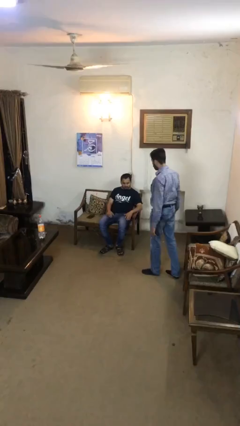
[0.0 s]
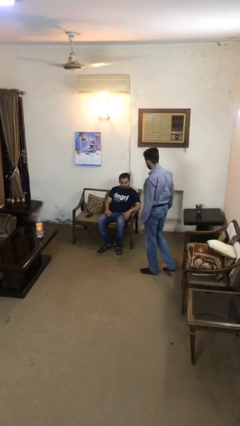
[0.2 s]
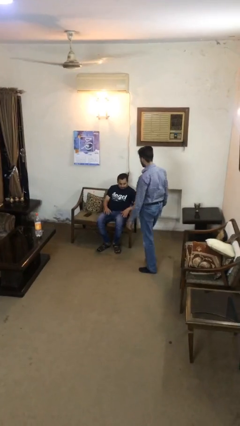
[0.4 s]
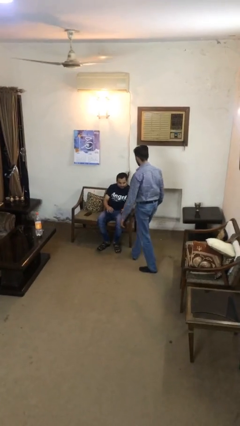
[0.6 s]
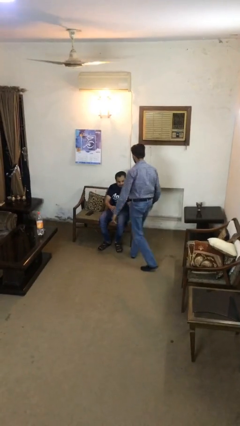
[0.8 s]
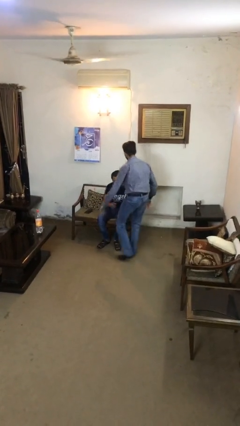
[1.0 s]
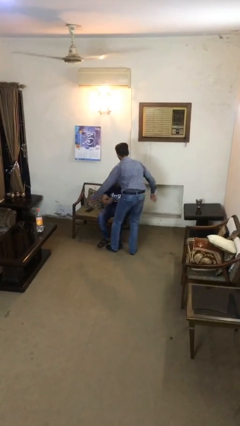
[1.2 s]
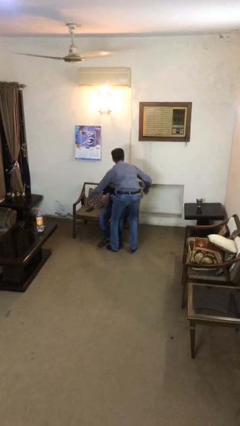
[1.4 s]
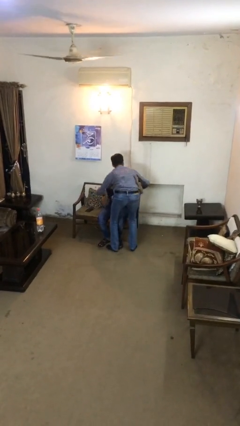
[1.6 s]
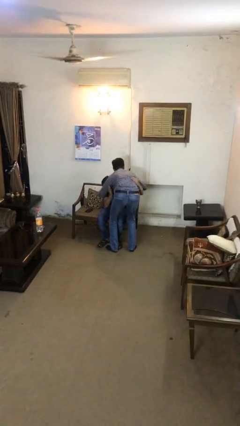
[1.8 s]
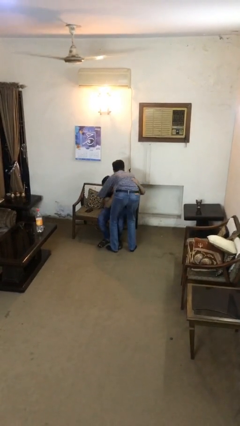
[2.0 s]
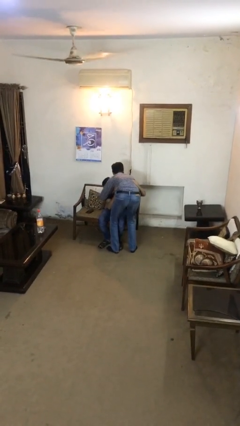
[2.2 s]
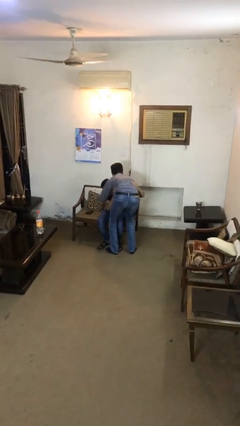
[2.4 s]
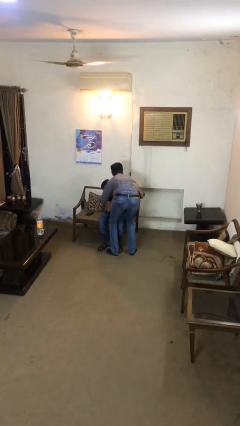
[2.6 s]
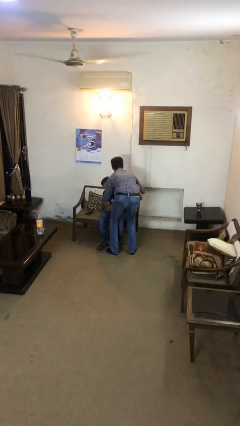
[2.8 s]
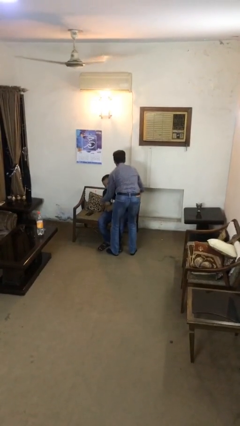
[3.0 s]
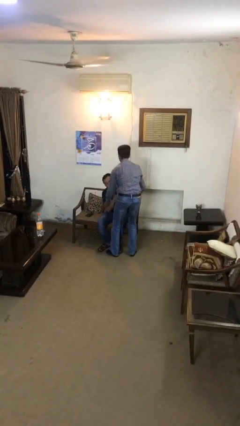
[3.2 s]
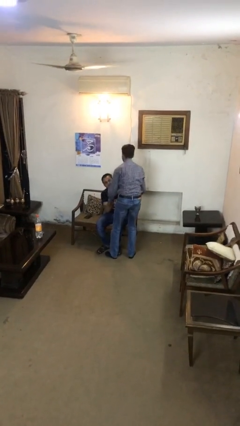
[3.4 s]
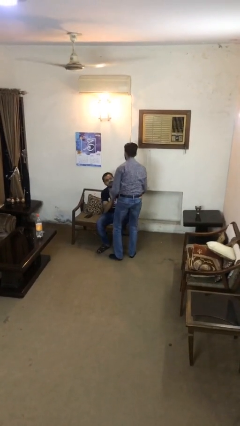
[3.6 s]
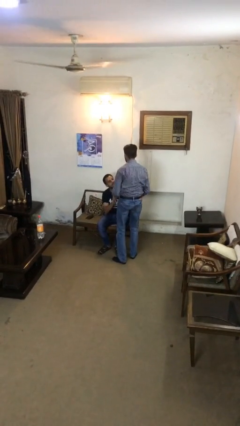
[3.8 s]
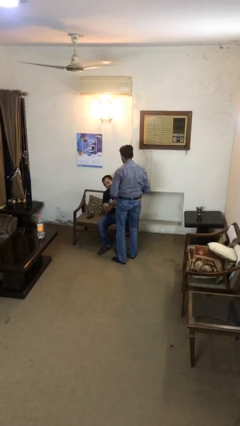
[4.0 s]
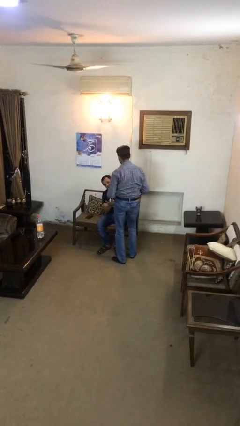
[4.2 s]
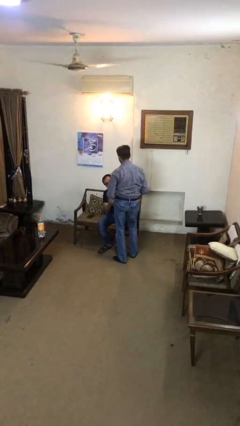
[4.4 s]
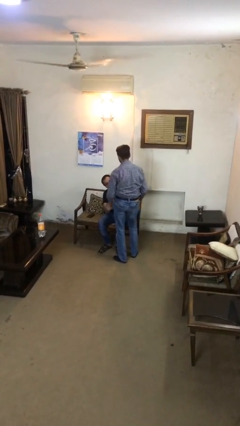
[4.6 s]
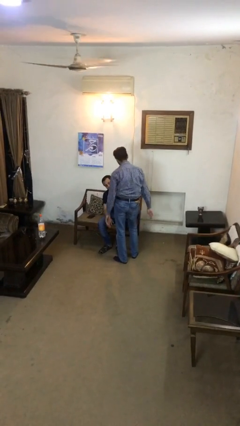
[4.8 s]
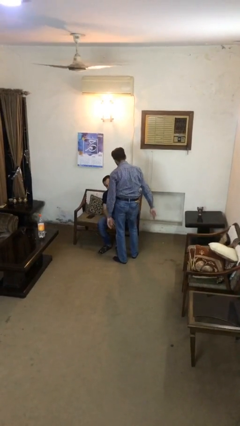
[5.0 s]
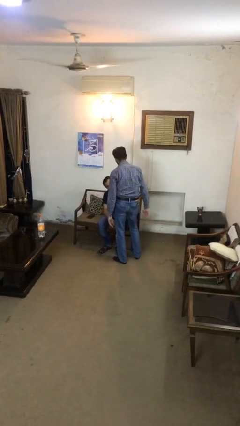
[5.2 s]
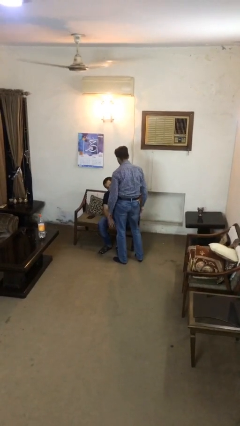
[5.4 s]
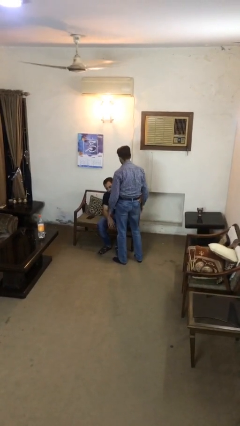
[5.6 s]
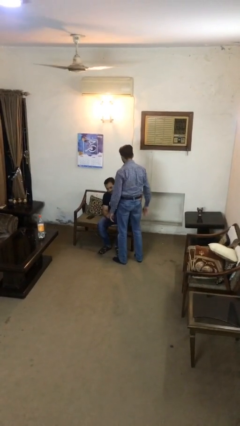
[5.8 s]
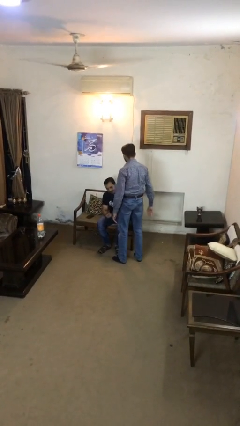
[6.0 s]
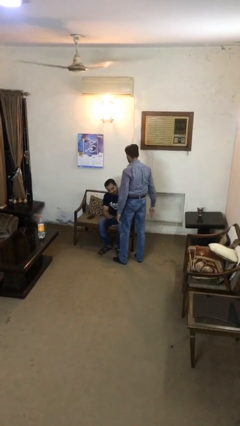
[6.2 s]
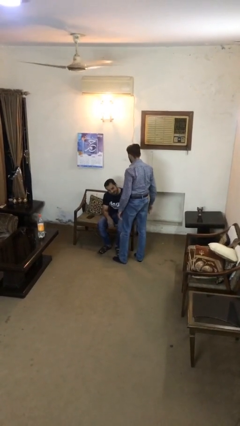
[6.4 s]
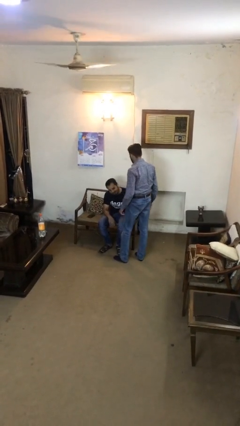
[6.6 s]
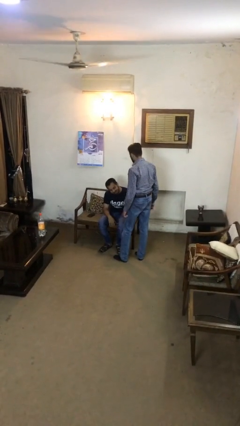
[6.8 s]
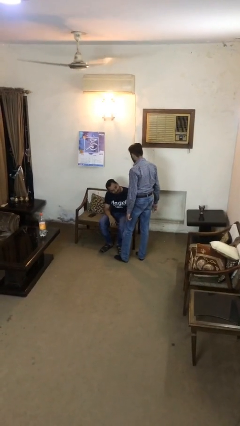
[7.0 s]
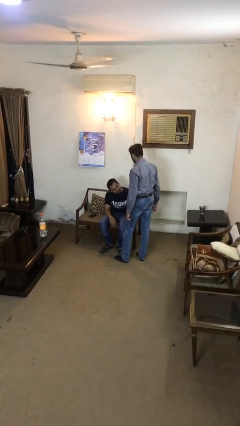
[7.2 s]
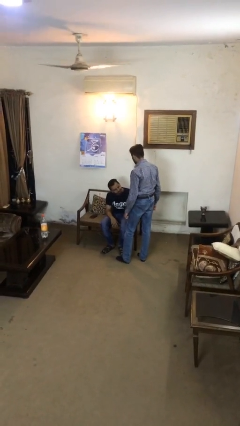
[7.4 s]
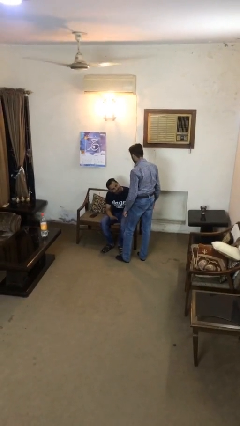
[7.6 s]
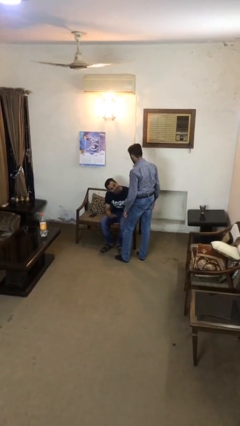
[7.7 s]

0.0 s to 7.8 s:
person embraces person

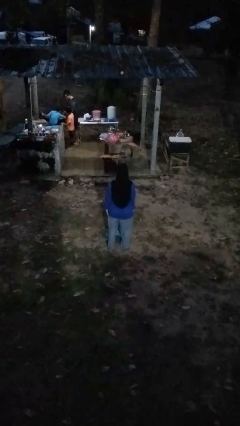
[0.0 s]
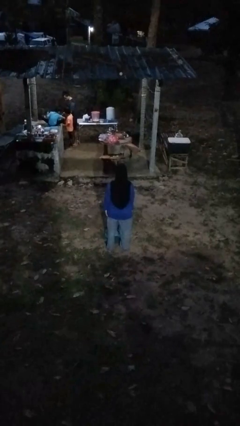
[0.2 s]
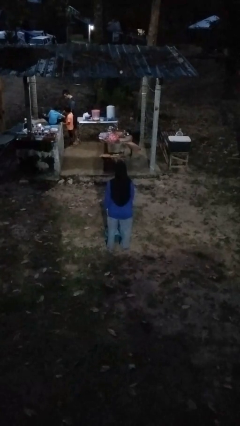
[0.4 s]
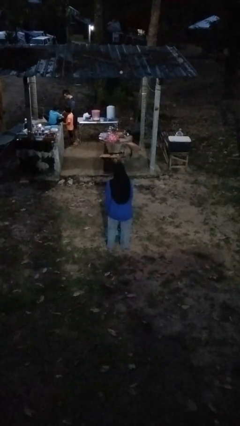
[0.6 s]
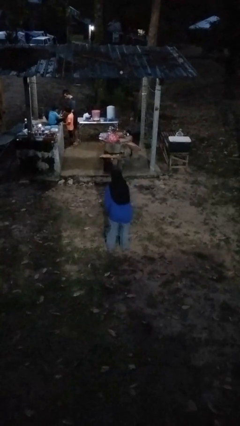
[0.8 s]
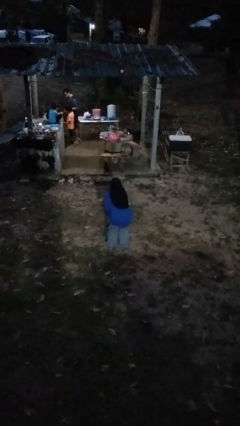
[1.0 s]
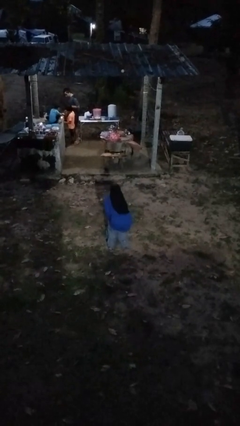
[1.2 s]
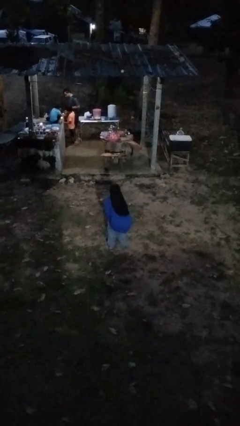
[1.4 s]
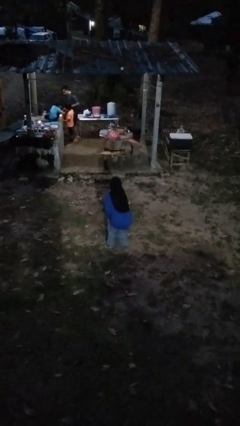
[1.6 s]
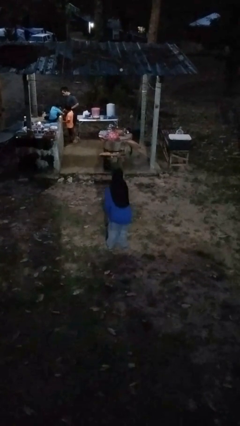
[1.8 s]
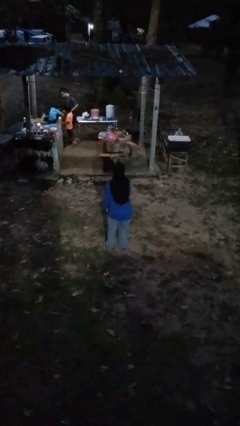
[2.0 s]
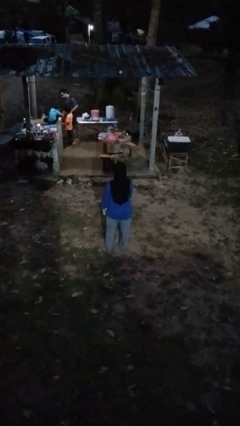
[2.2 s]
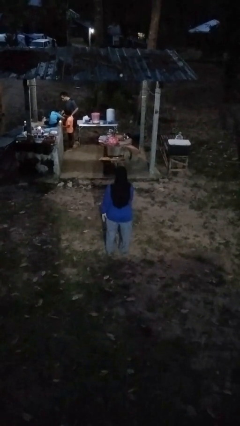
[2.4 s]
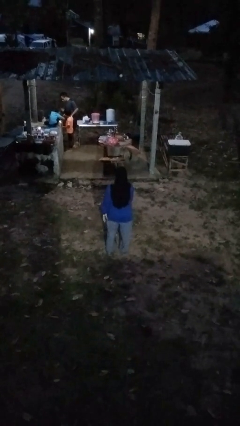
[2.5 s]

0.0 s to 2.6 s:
person picks up object from floor

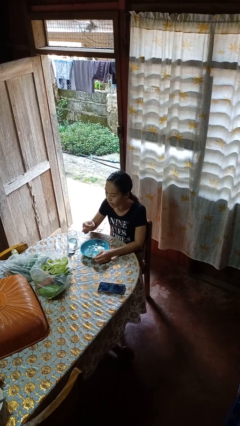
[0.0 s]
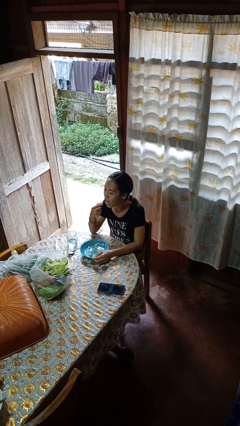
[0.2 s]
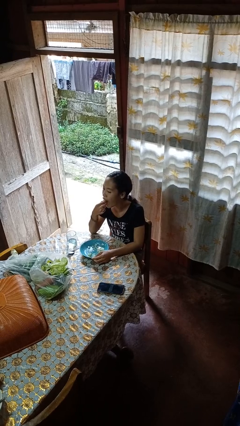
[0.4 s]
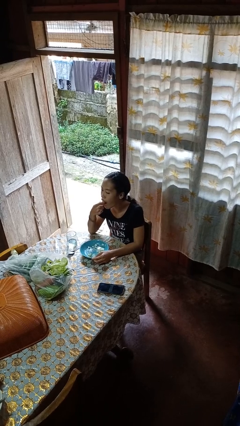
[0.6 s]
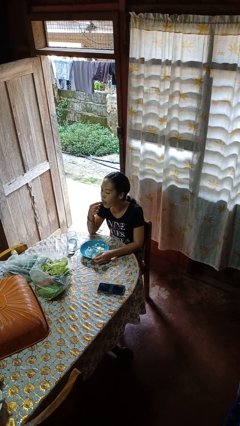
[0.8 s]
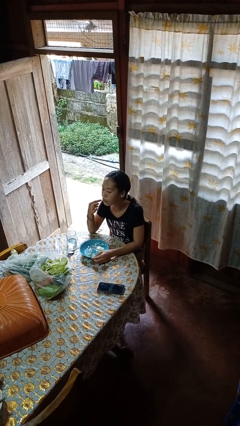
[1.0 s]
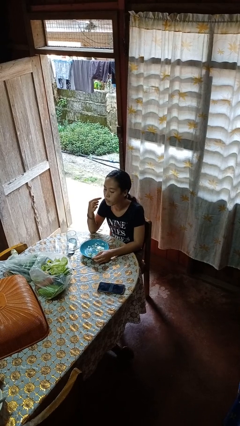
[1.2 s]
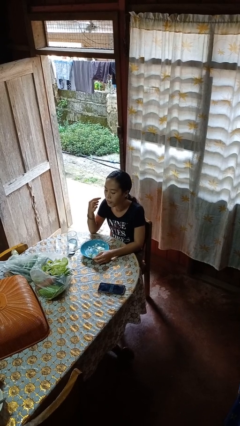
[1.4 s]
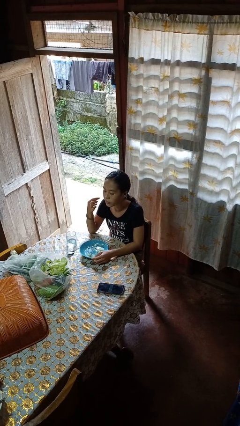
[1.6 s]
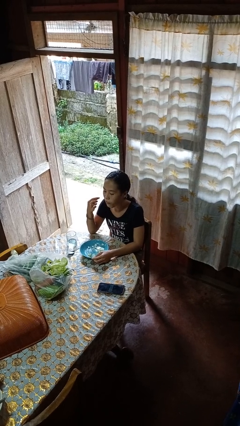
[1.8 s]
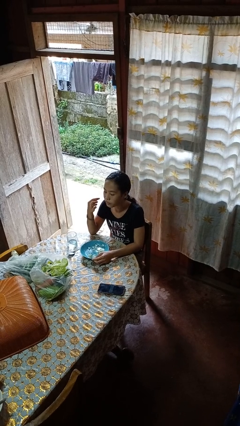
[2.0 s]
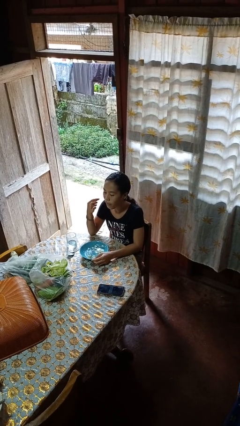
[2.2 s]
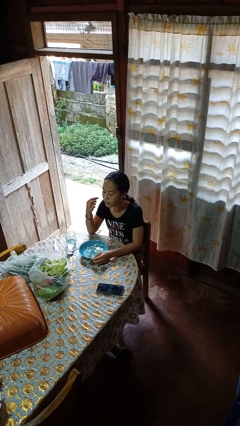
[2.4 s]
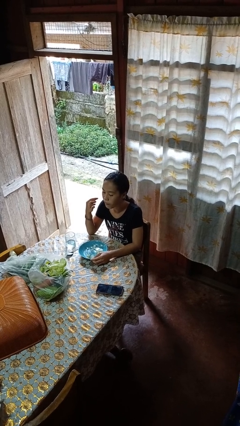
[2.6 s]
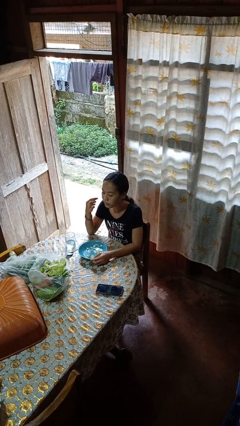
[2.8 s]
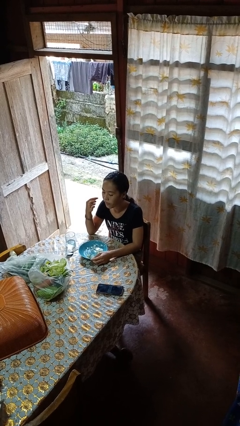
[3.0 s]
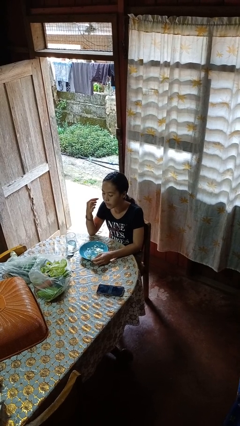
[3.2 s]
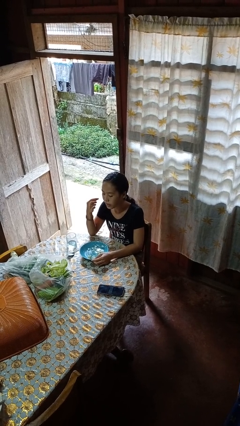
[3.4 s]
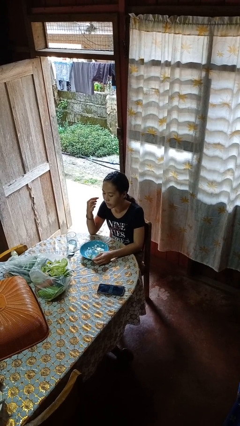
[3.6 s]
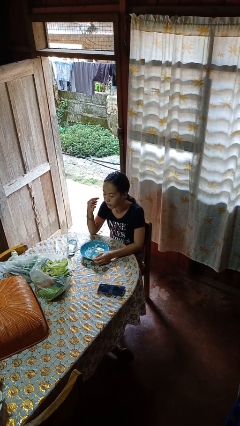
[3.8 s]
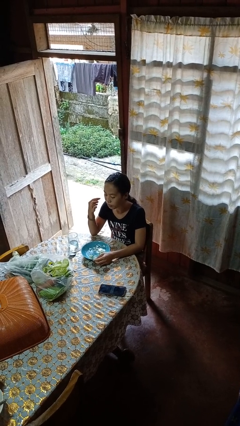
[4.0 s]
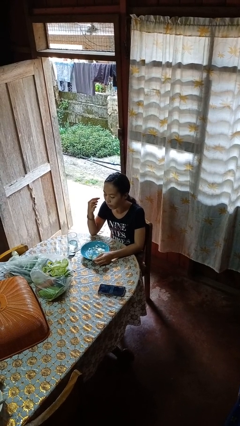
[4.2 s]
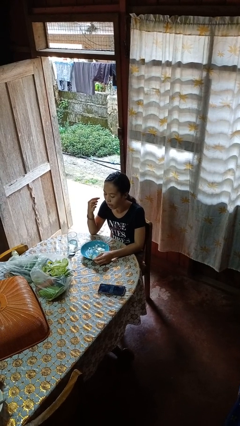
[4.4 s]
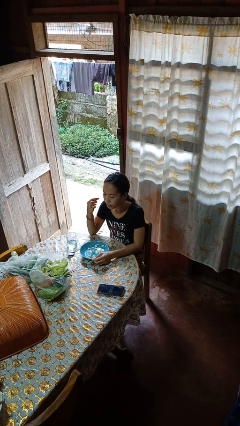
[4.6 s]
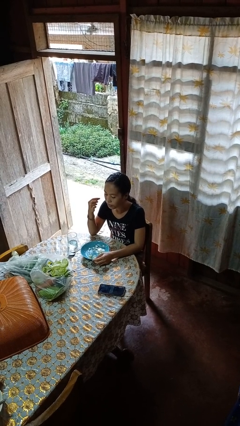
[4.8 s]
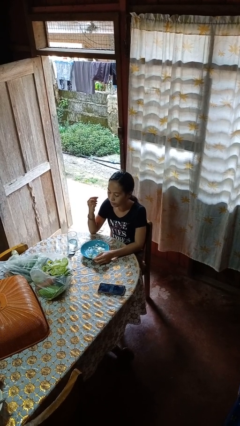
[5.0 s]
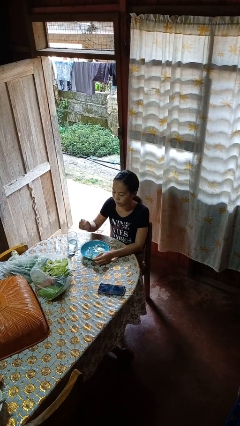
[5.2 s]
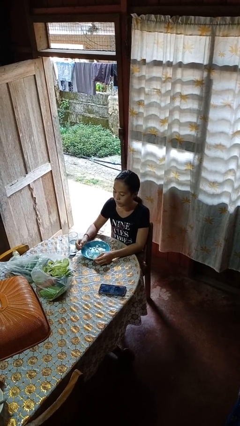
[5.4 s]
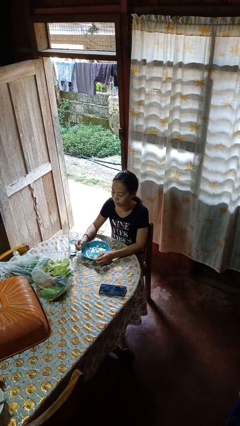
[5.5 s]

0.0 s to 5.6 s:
person eats with hands

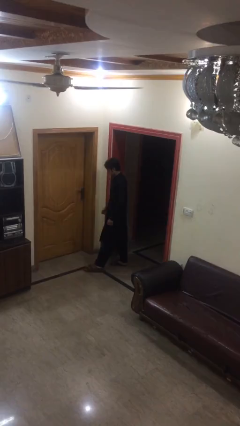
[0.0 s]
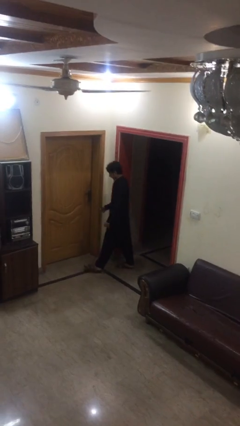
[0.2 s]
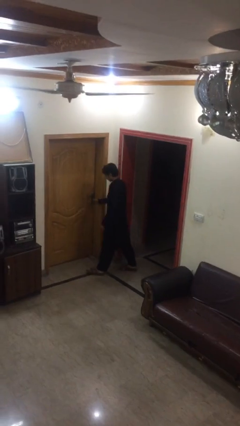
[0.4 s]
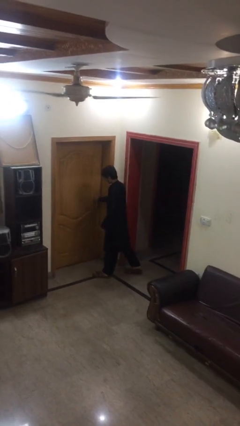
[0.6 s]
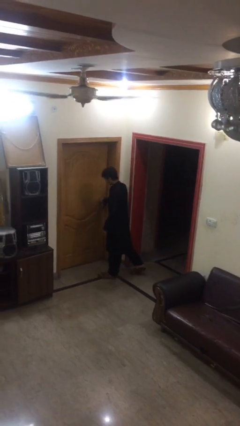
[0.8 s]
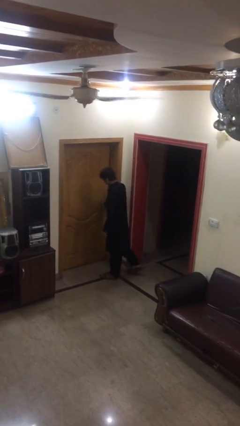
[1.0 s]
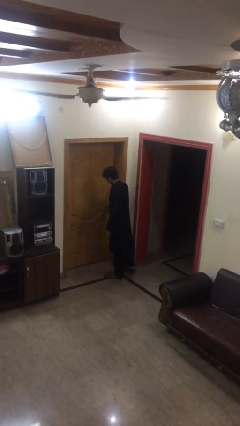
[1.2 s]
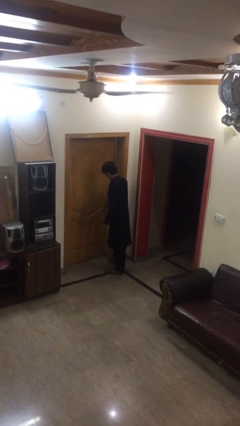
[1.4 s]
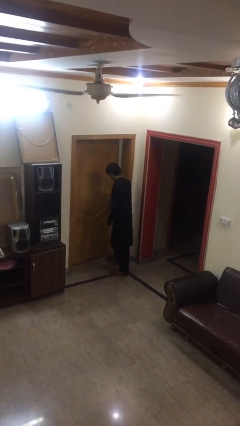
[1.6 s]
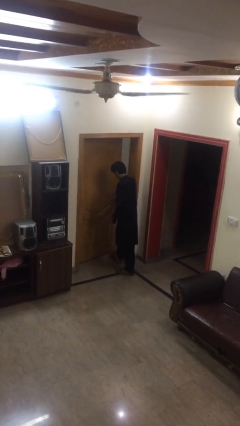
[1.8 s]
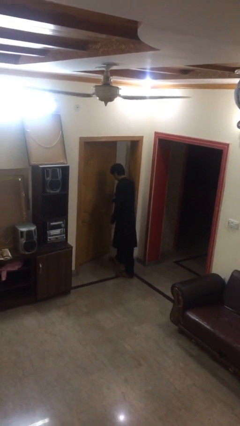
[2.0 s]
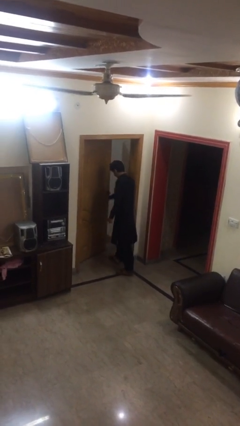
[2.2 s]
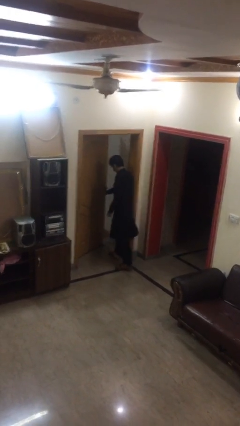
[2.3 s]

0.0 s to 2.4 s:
person opens facility door
